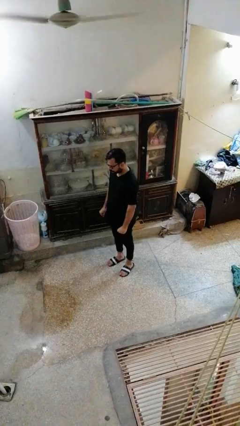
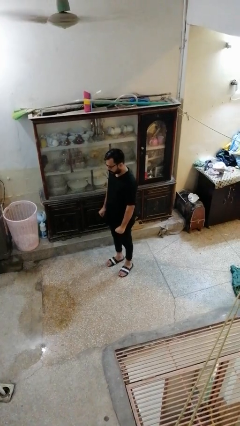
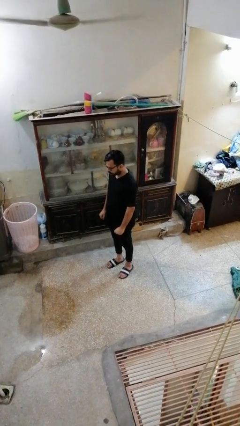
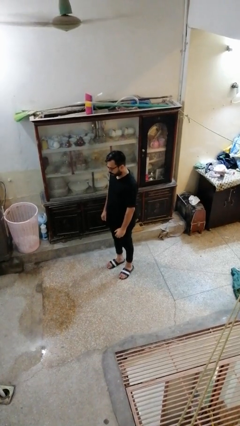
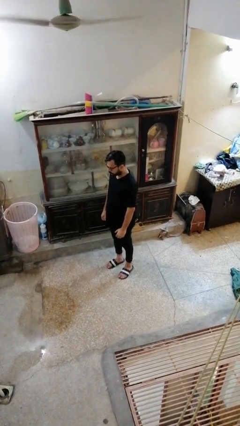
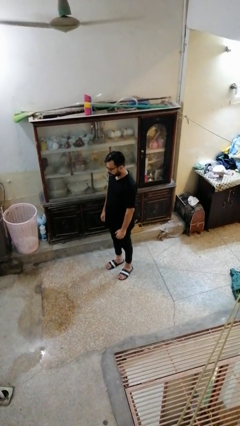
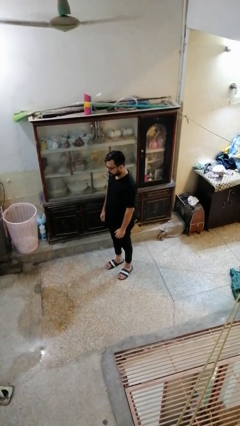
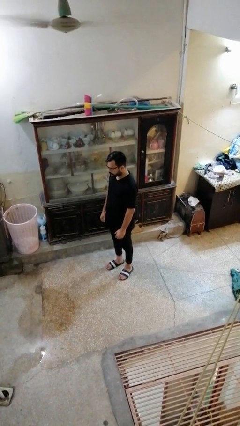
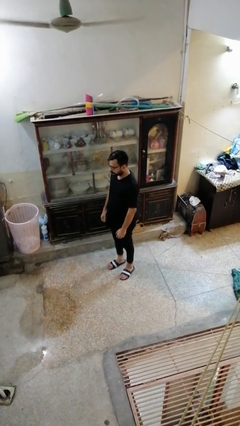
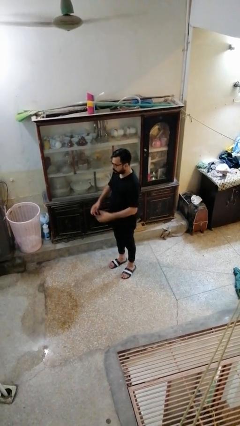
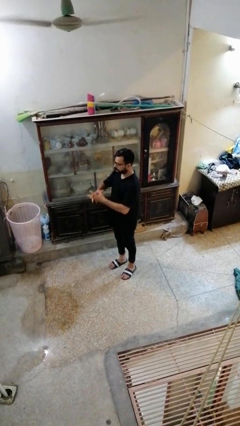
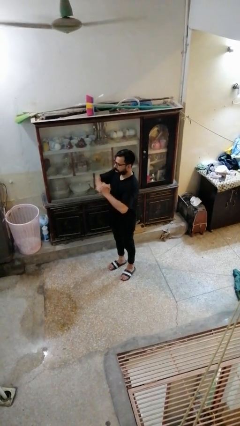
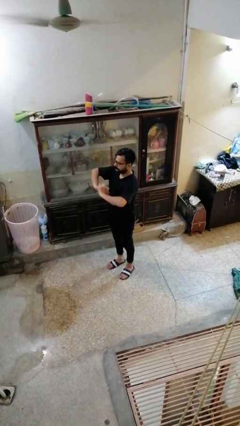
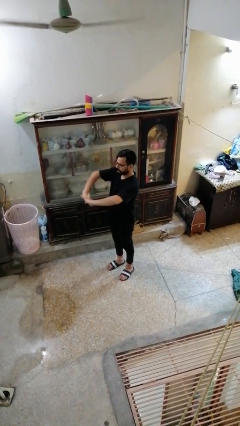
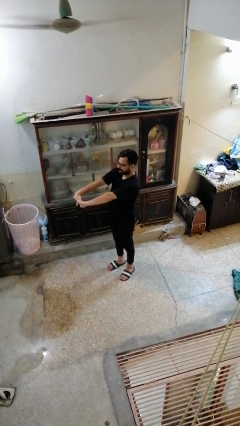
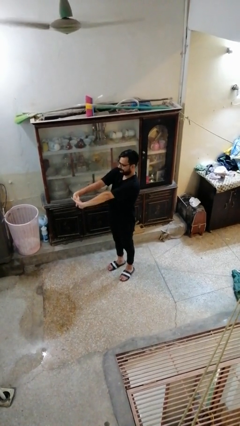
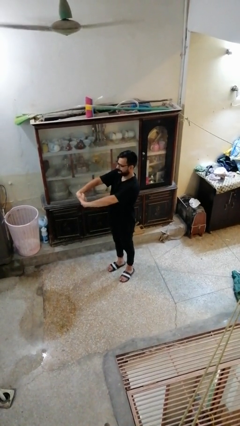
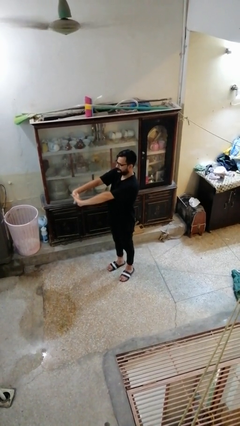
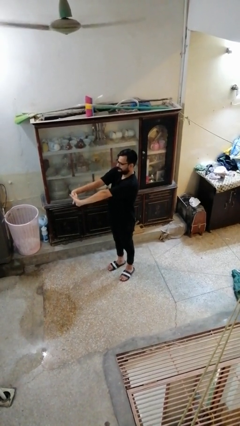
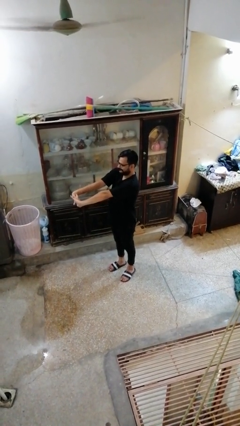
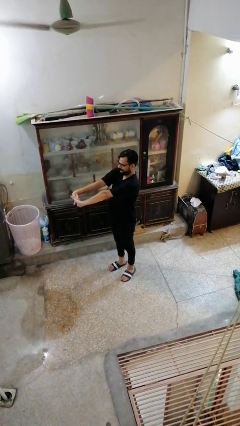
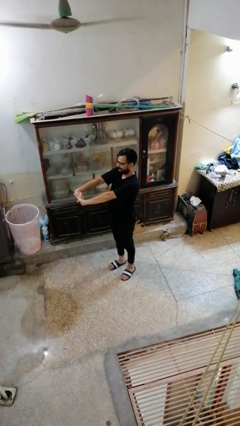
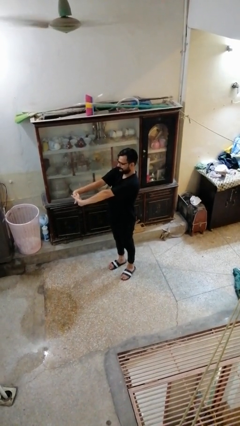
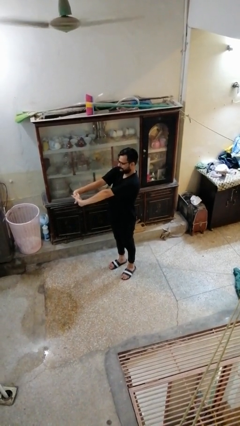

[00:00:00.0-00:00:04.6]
person cracks knuckles

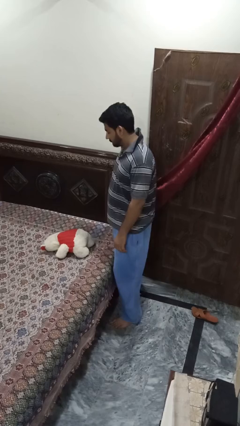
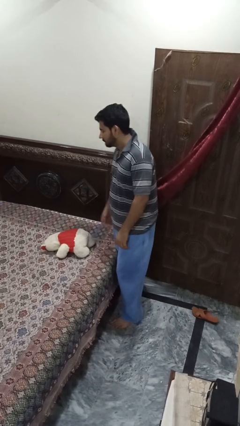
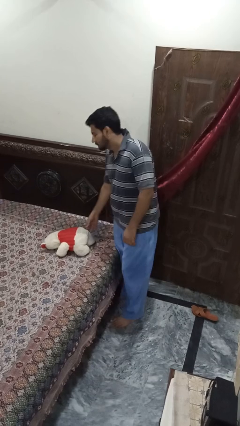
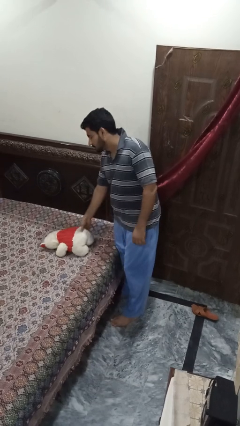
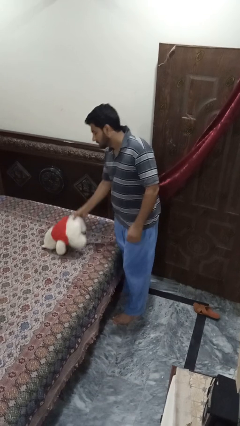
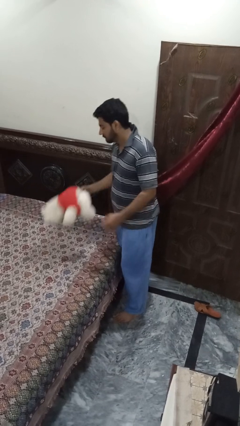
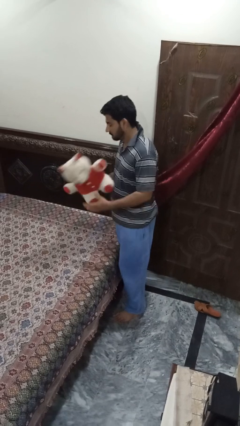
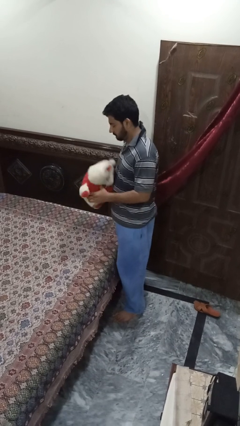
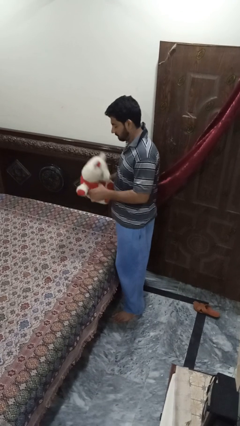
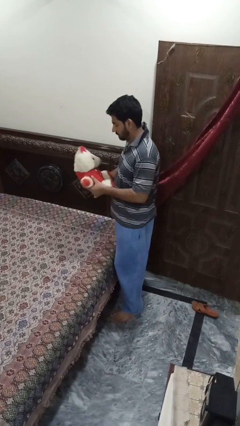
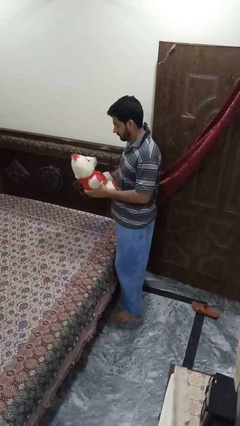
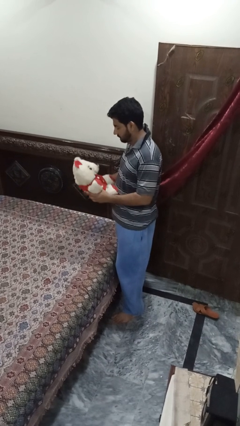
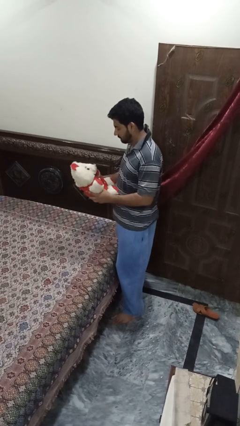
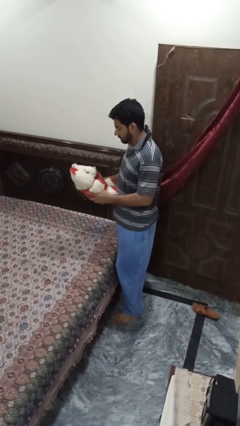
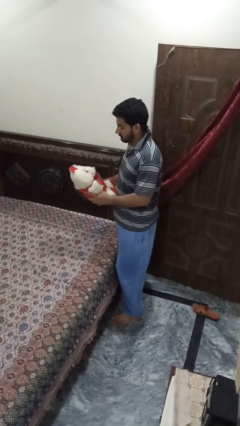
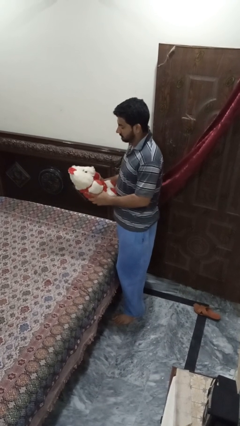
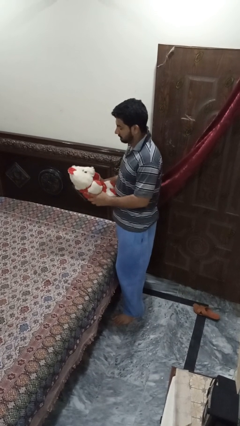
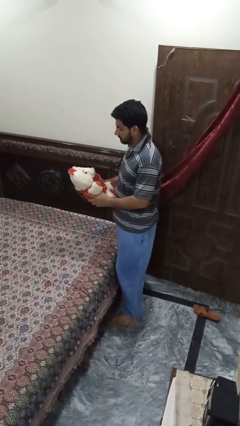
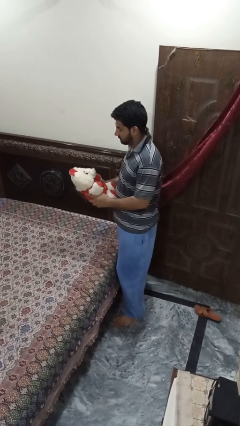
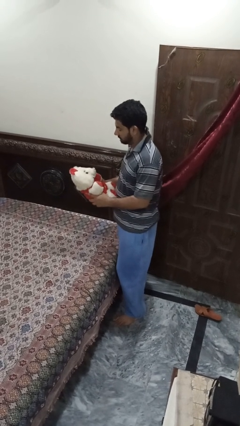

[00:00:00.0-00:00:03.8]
person picks up object from bed

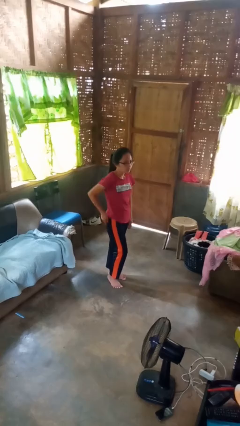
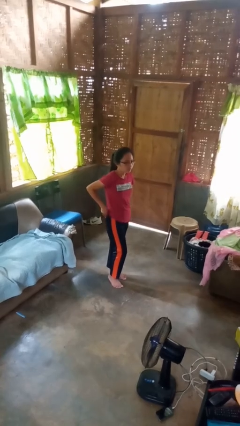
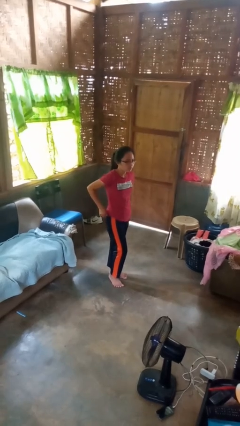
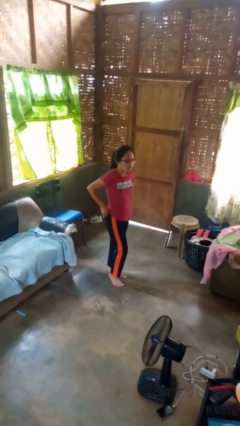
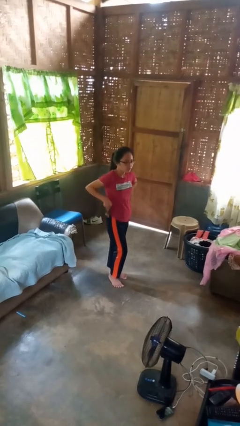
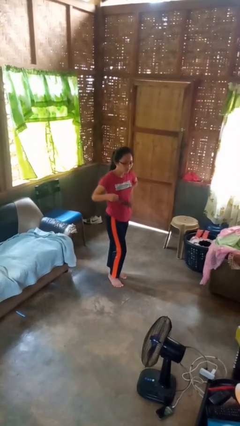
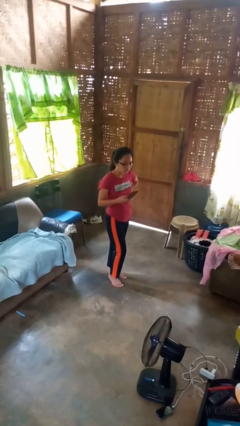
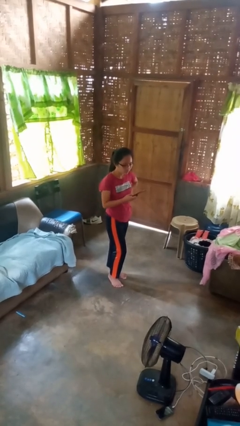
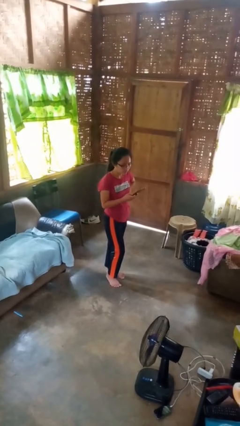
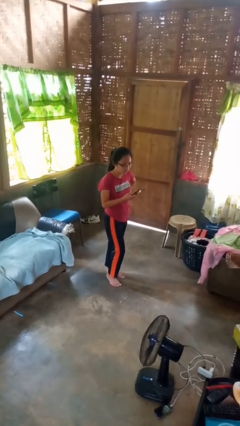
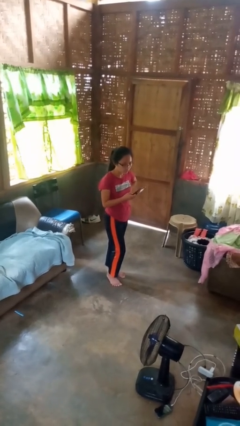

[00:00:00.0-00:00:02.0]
person takes phone from pocket

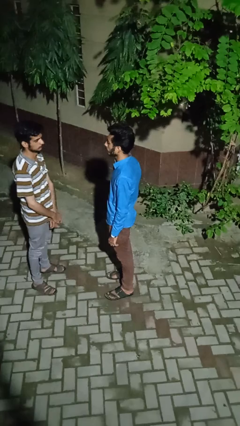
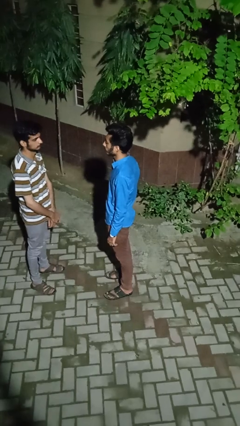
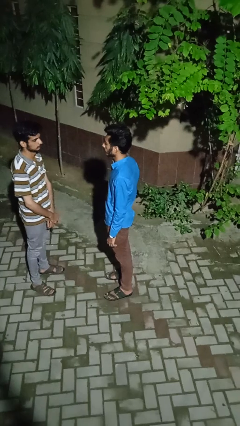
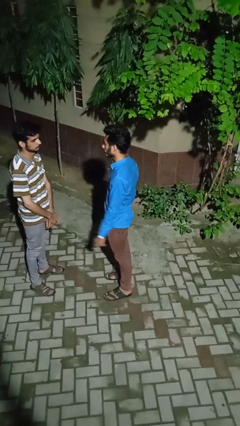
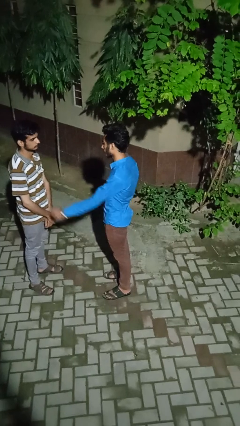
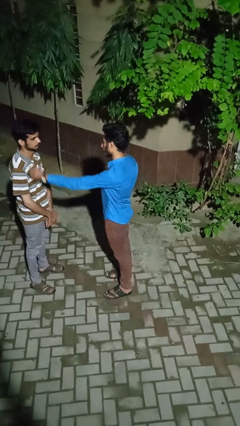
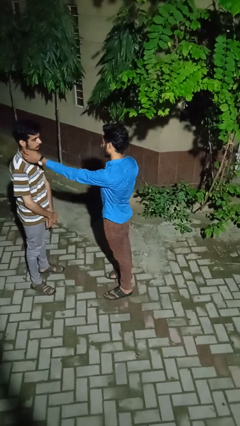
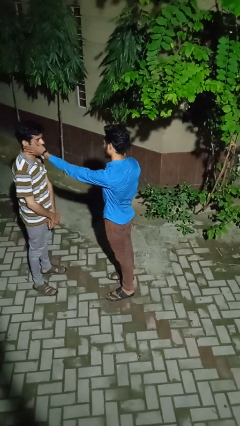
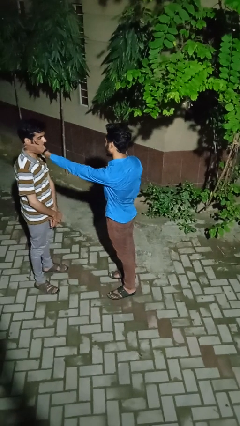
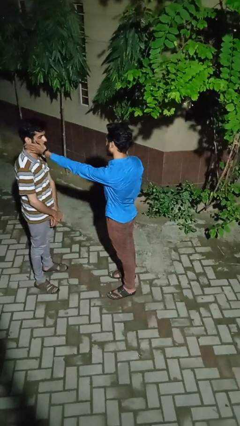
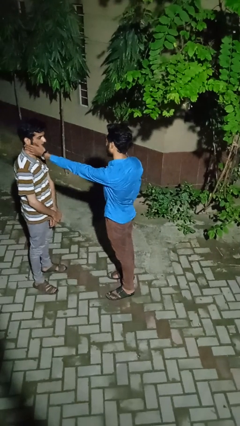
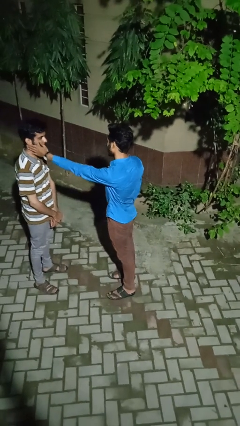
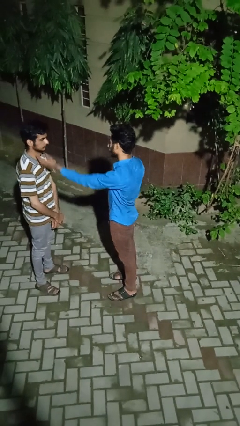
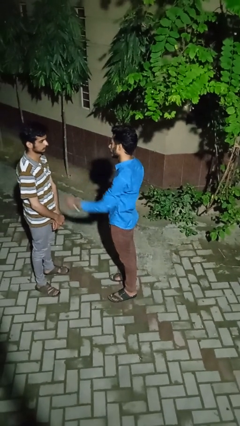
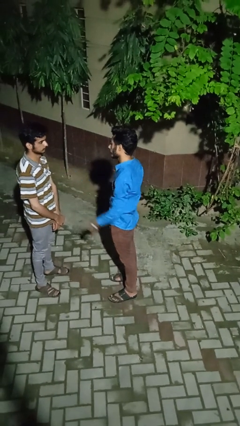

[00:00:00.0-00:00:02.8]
person touches face of person

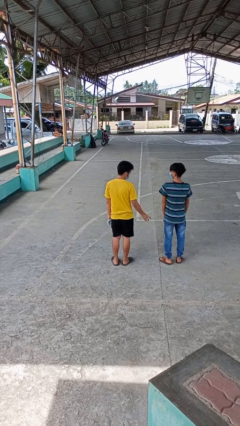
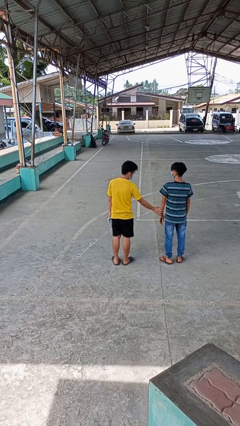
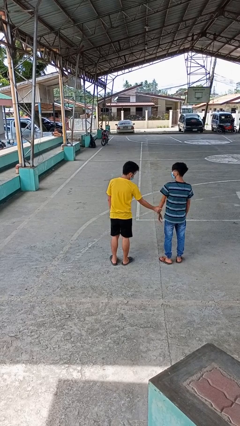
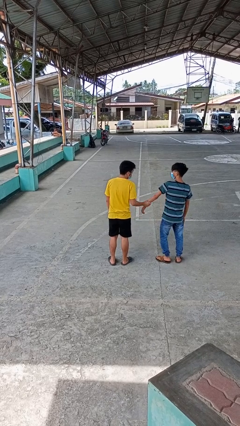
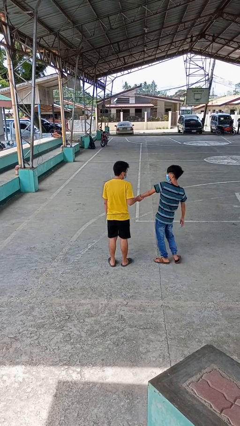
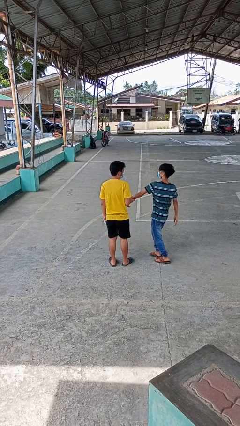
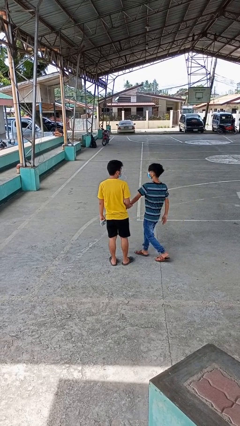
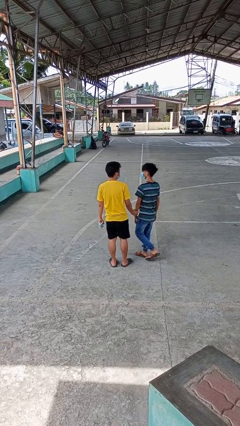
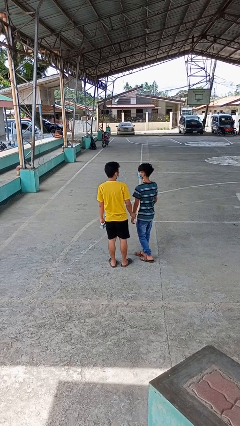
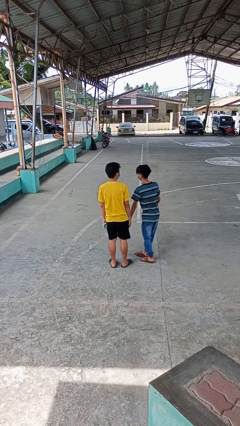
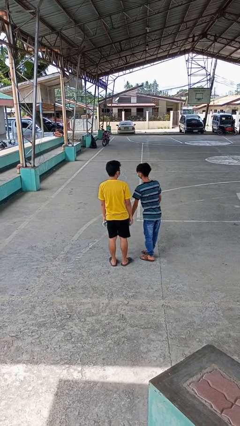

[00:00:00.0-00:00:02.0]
person grabs person by forearm

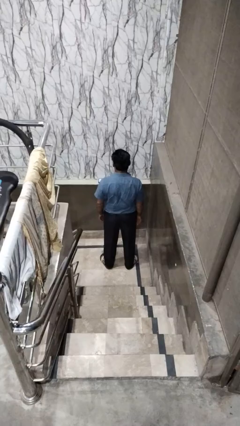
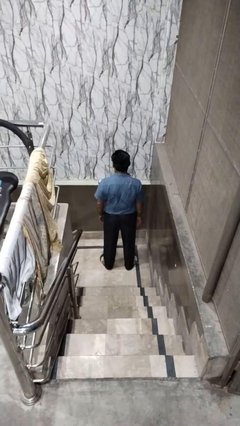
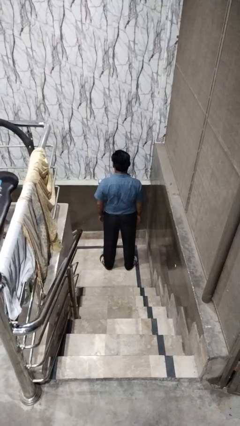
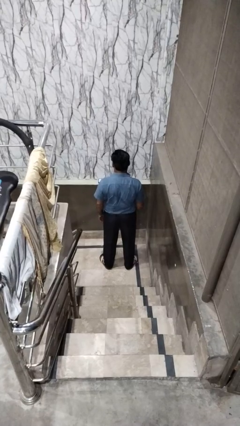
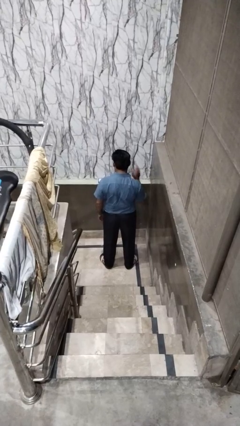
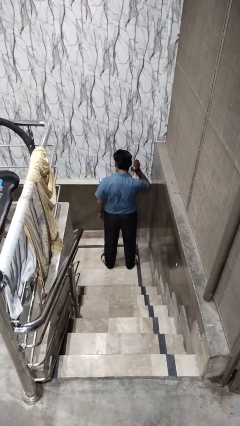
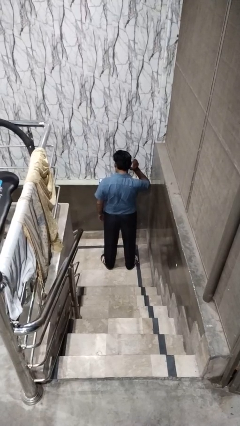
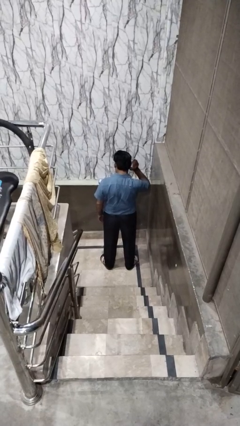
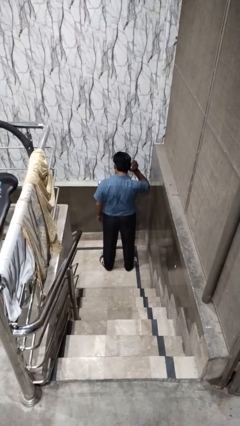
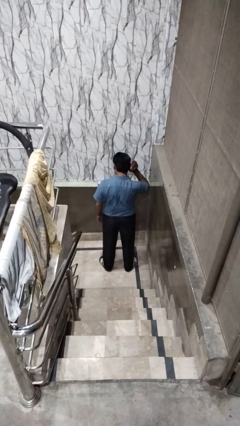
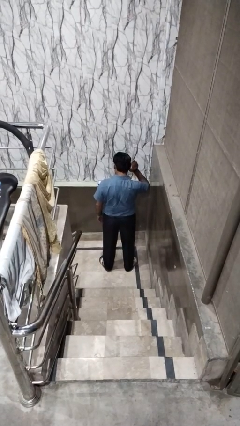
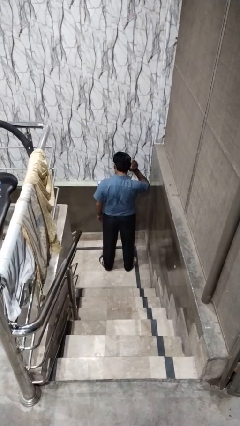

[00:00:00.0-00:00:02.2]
person gestures listen closely
